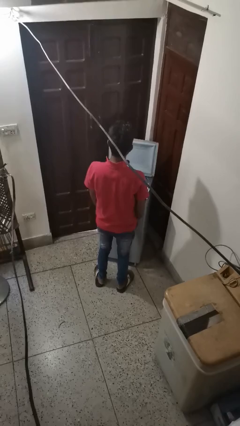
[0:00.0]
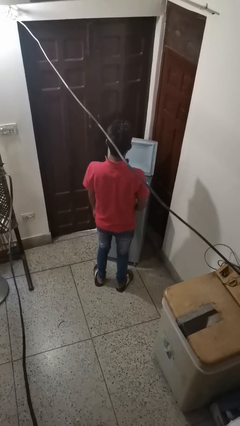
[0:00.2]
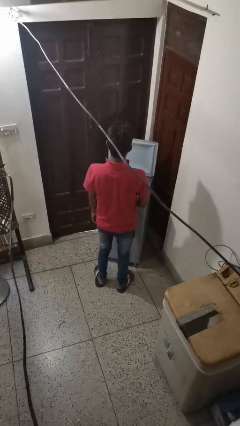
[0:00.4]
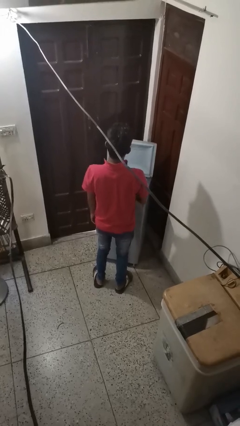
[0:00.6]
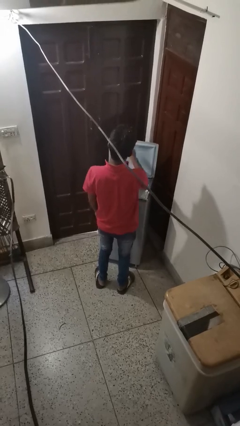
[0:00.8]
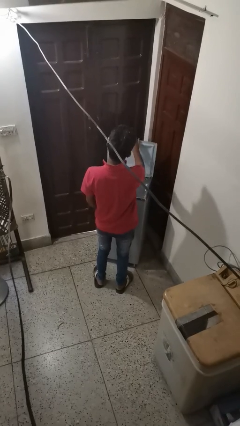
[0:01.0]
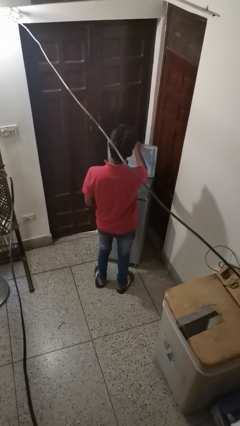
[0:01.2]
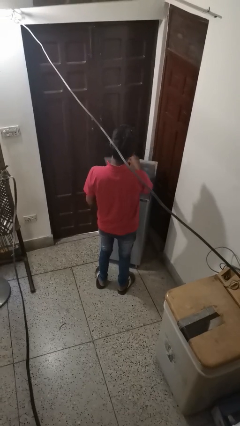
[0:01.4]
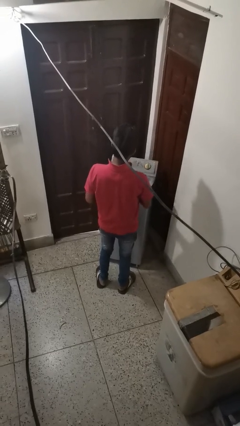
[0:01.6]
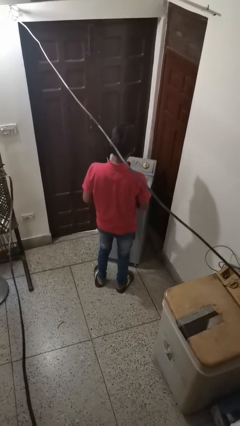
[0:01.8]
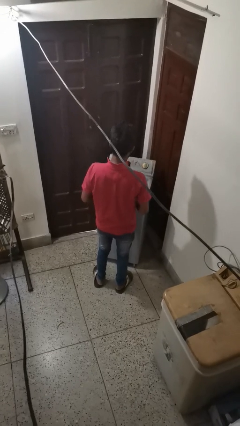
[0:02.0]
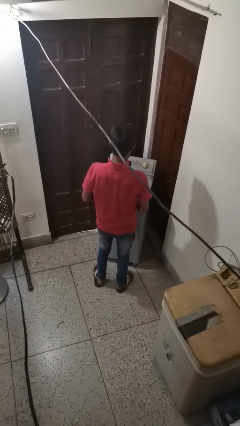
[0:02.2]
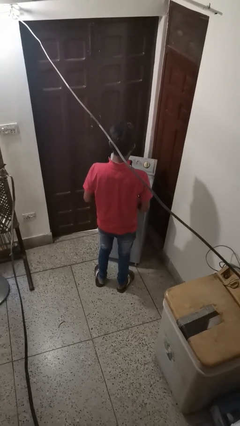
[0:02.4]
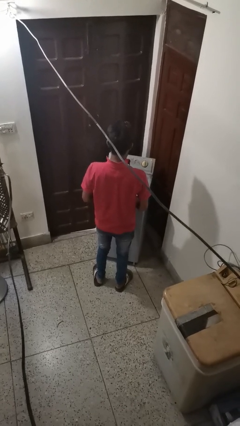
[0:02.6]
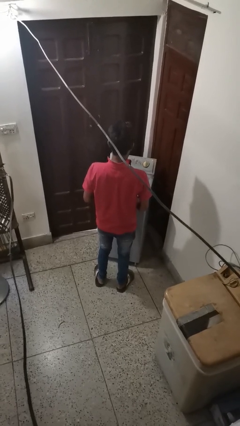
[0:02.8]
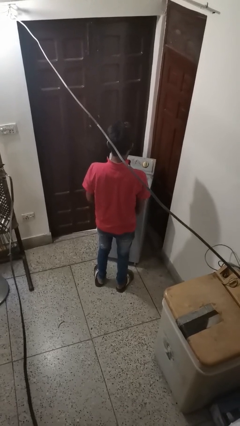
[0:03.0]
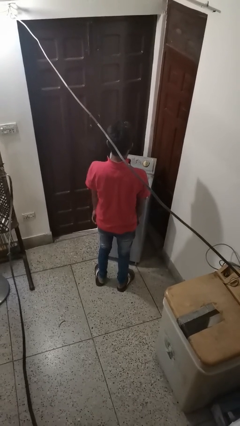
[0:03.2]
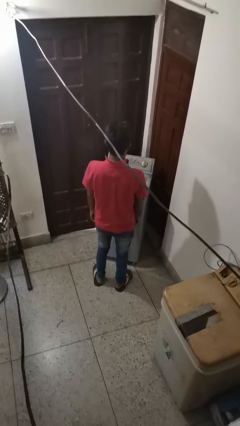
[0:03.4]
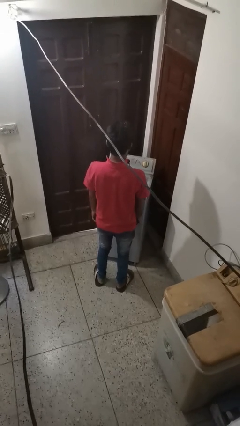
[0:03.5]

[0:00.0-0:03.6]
person closes clothes washer

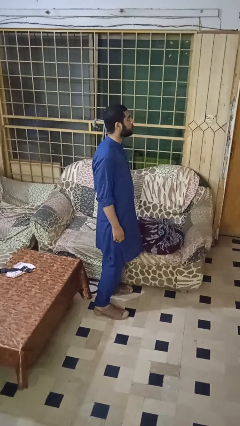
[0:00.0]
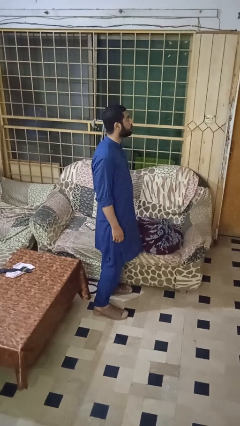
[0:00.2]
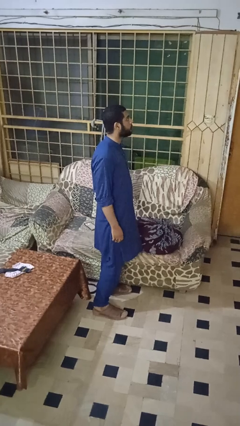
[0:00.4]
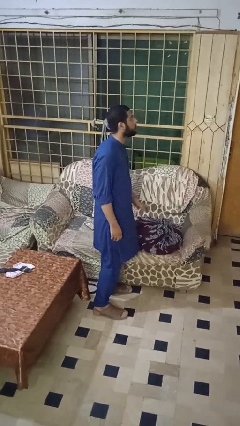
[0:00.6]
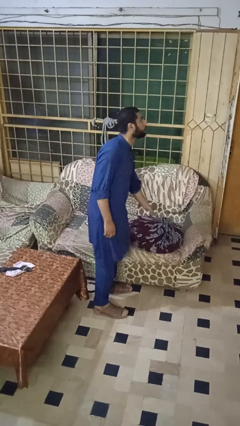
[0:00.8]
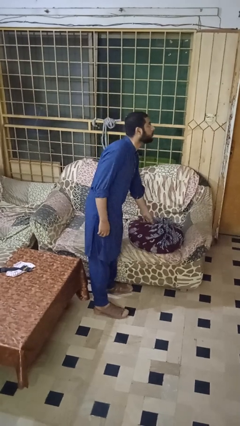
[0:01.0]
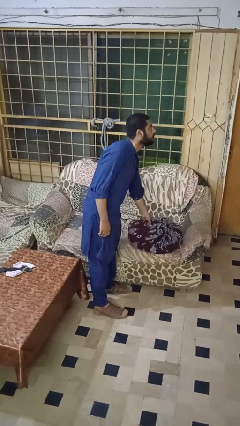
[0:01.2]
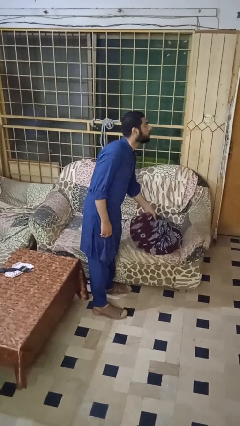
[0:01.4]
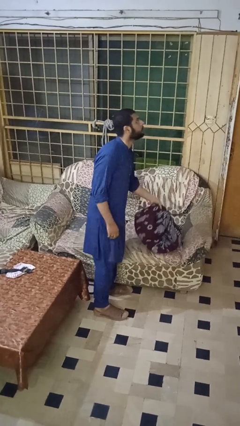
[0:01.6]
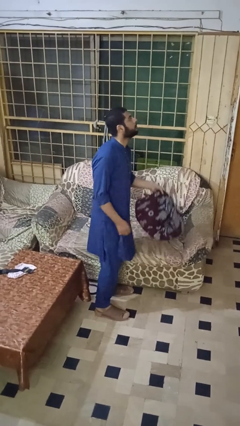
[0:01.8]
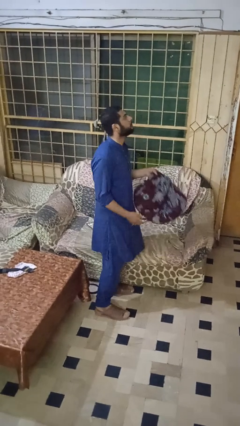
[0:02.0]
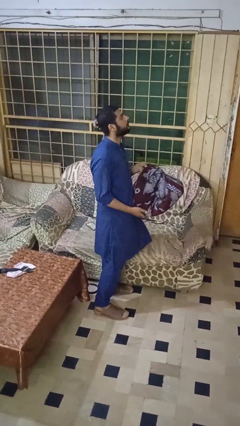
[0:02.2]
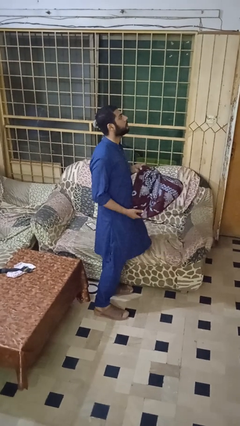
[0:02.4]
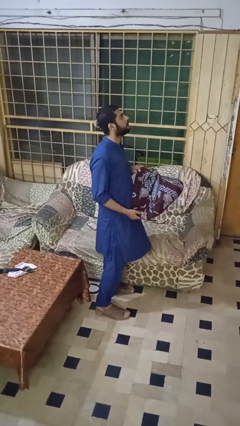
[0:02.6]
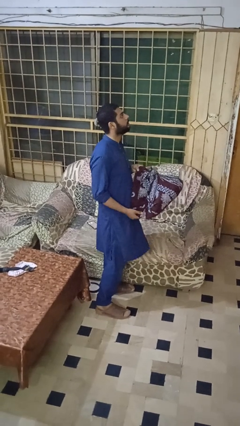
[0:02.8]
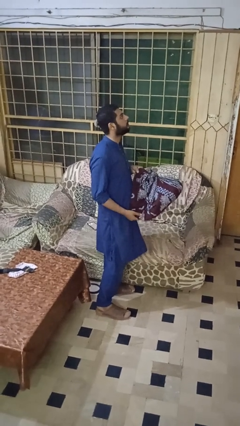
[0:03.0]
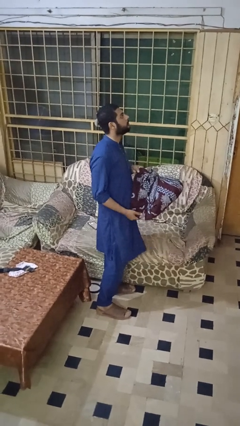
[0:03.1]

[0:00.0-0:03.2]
person picks up object from couch

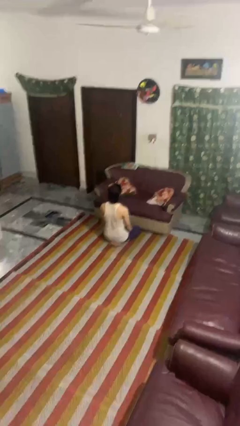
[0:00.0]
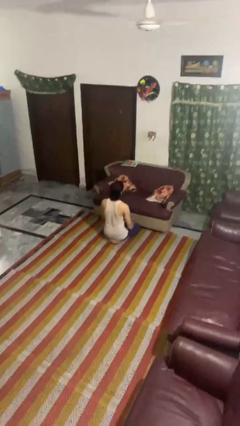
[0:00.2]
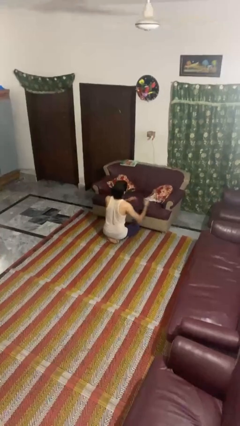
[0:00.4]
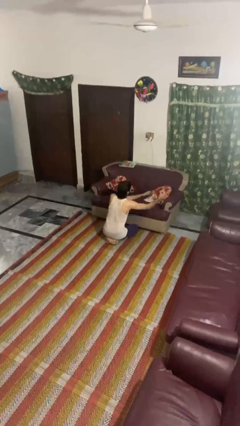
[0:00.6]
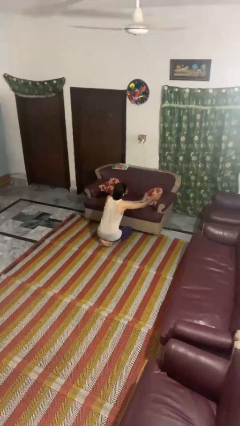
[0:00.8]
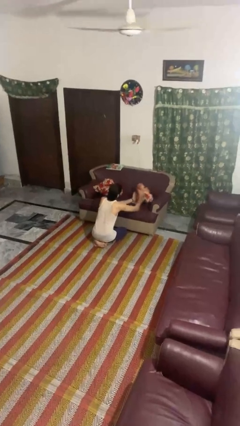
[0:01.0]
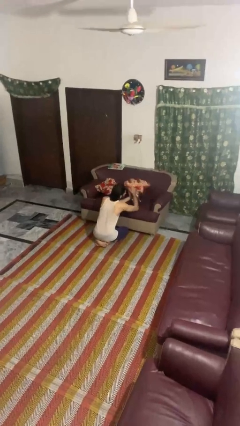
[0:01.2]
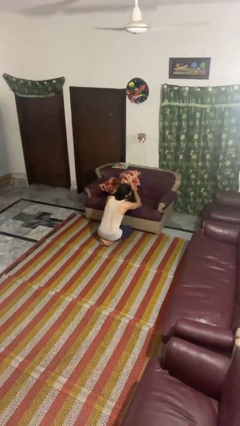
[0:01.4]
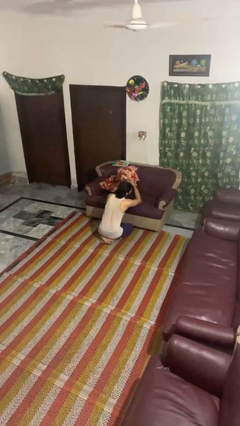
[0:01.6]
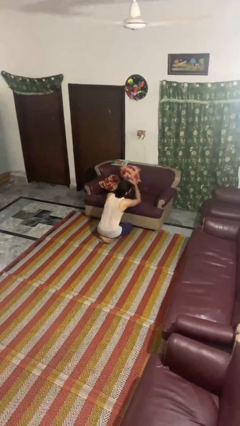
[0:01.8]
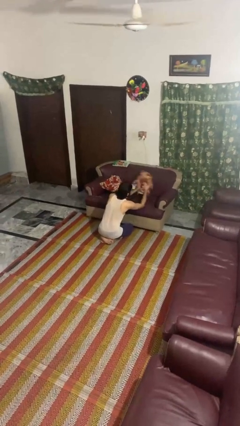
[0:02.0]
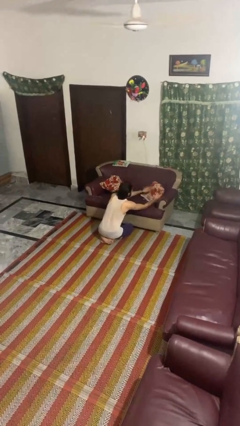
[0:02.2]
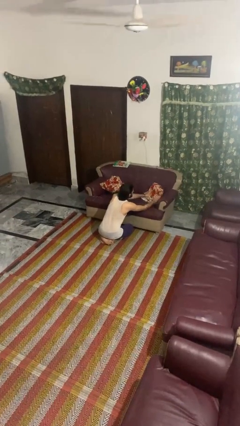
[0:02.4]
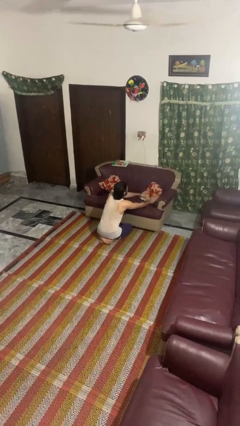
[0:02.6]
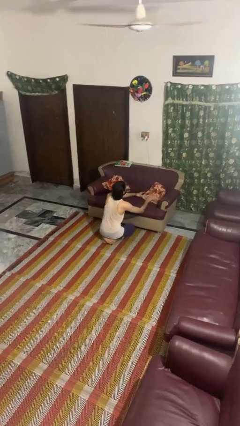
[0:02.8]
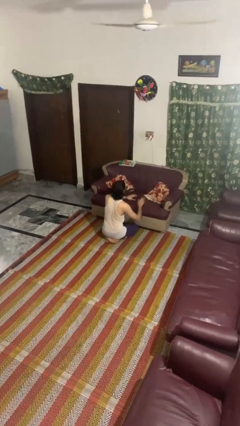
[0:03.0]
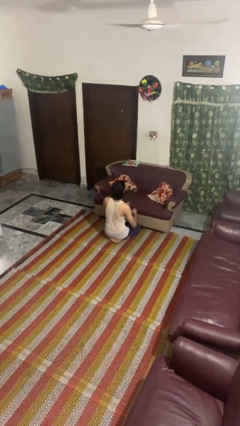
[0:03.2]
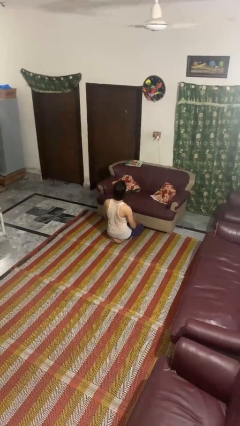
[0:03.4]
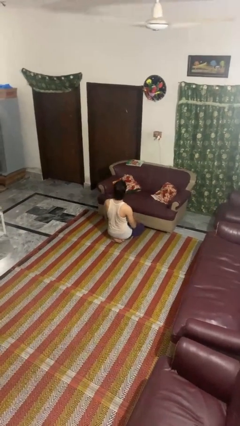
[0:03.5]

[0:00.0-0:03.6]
person searches in couch

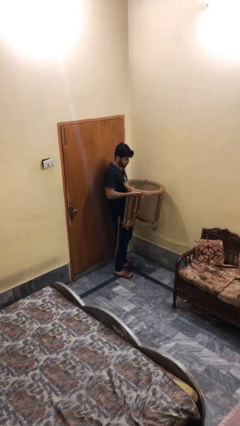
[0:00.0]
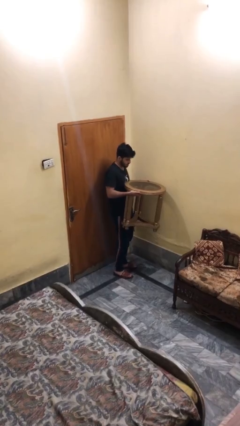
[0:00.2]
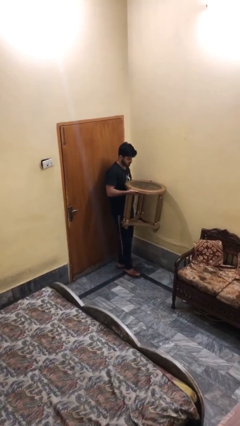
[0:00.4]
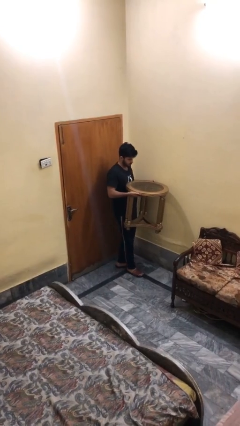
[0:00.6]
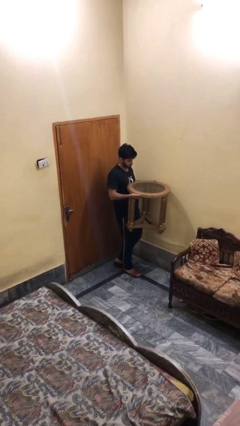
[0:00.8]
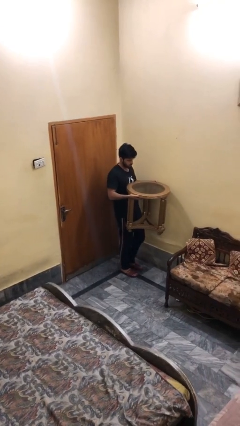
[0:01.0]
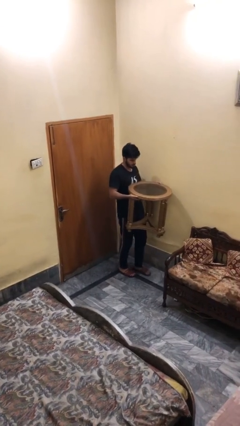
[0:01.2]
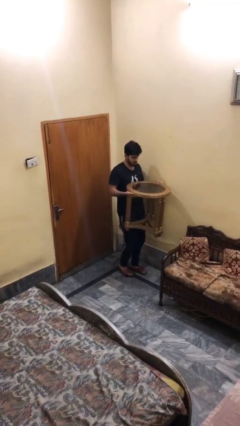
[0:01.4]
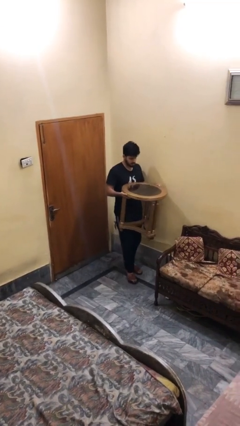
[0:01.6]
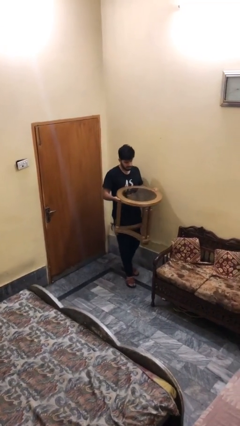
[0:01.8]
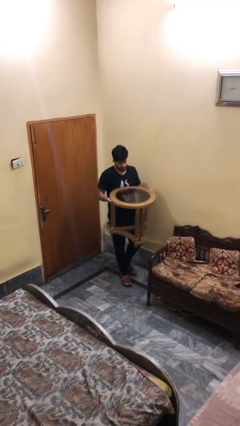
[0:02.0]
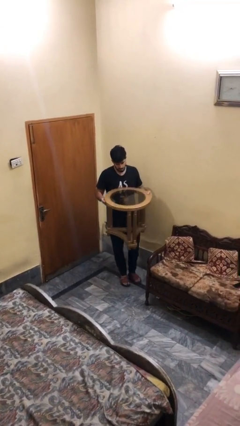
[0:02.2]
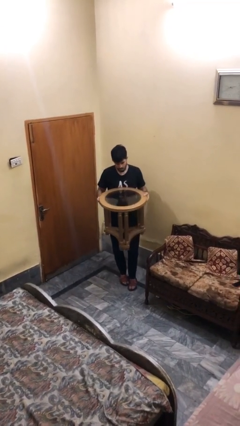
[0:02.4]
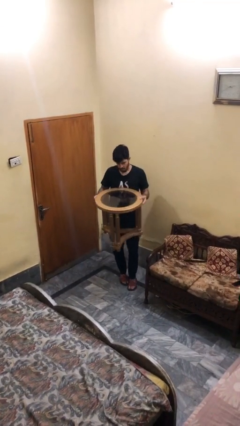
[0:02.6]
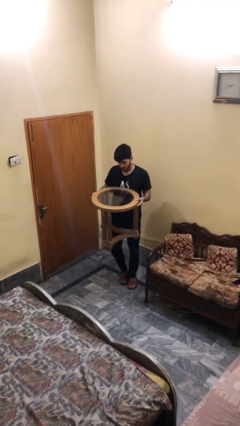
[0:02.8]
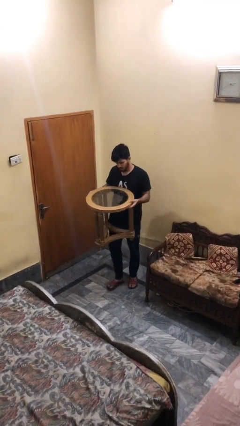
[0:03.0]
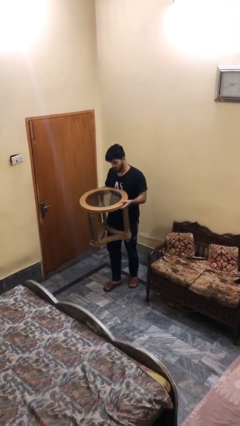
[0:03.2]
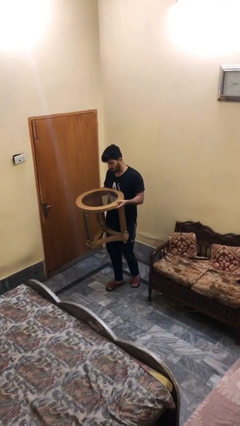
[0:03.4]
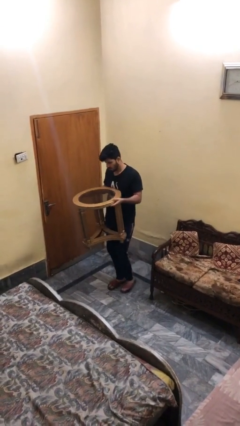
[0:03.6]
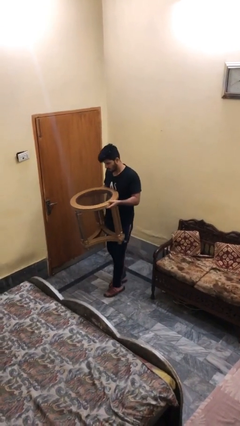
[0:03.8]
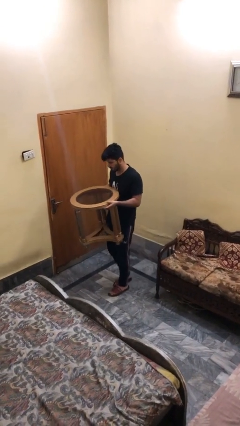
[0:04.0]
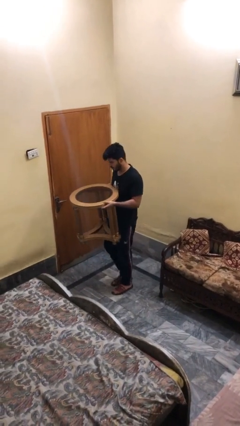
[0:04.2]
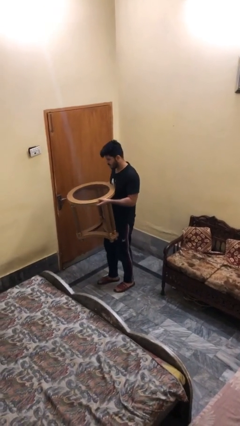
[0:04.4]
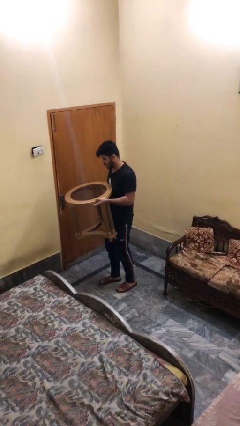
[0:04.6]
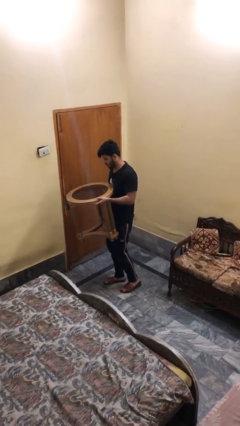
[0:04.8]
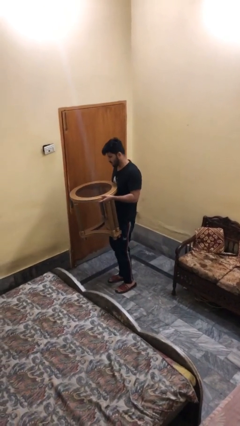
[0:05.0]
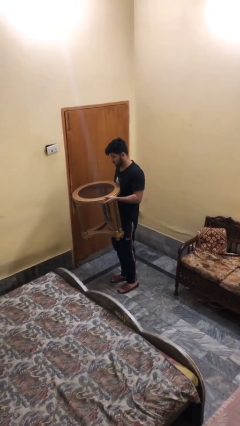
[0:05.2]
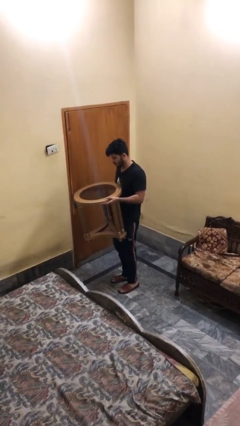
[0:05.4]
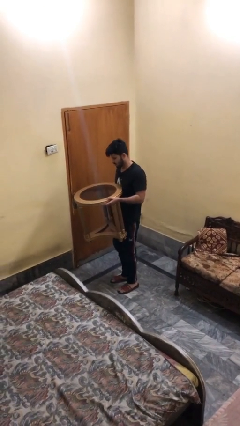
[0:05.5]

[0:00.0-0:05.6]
person carries furniture

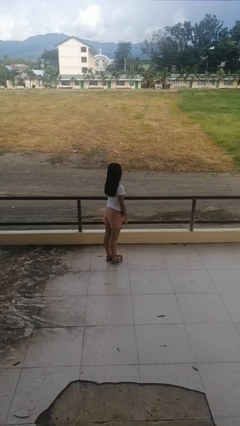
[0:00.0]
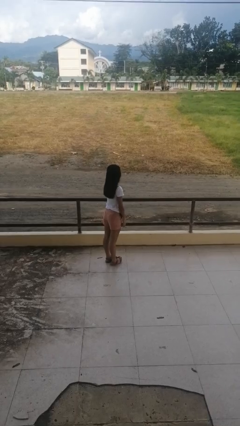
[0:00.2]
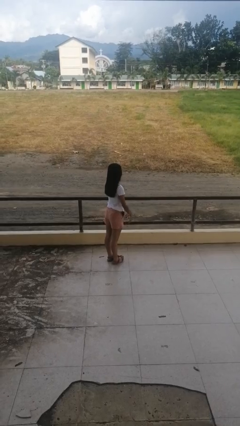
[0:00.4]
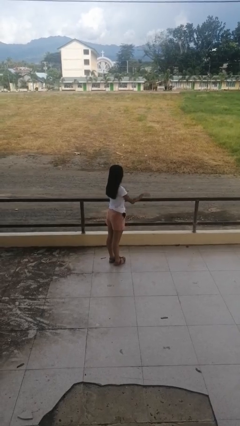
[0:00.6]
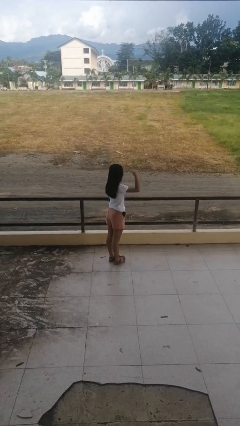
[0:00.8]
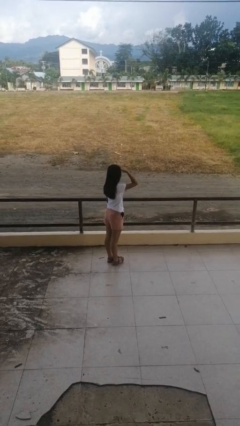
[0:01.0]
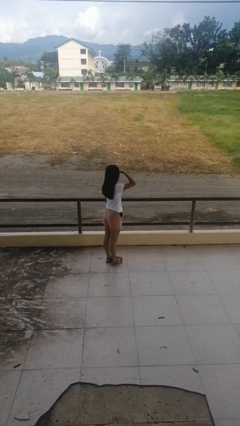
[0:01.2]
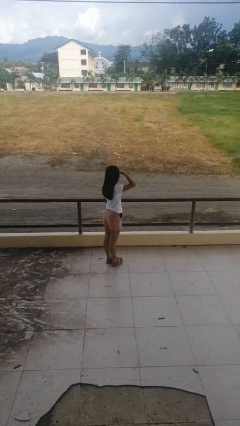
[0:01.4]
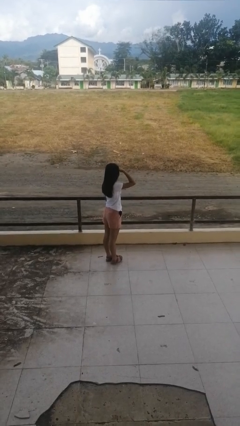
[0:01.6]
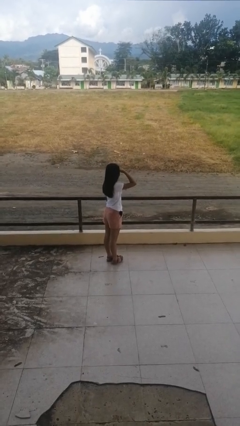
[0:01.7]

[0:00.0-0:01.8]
person shades eyes
